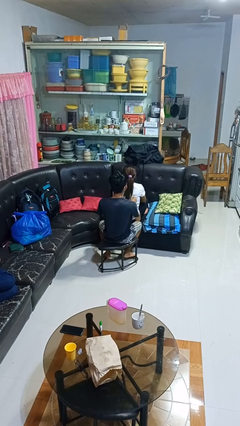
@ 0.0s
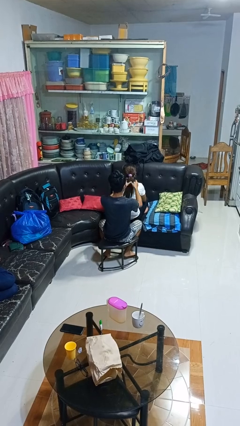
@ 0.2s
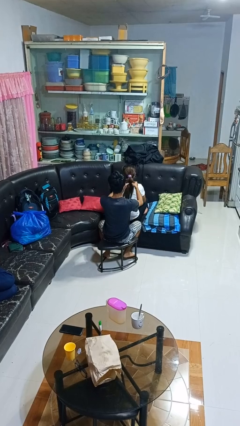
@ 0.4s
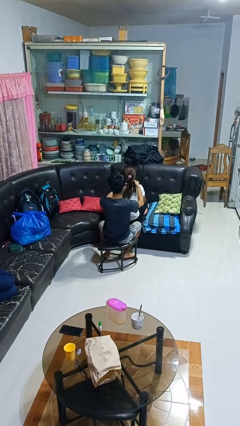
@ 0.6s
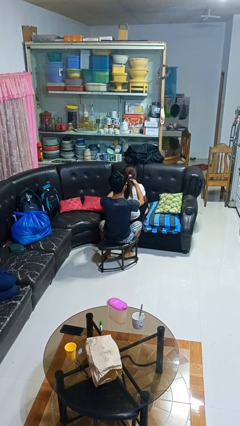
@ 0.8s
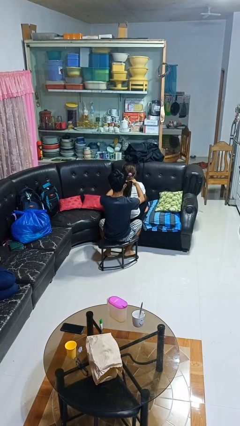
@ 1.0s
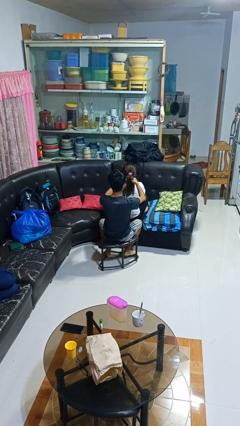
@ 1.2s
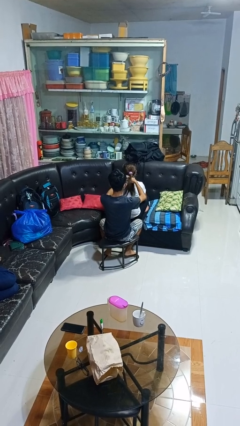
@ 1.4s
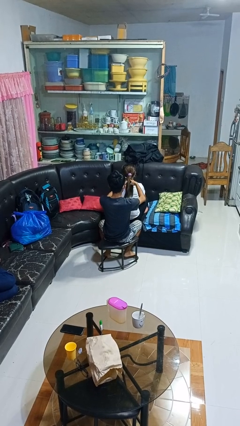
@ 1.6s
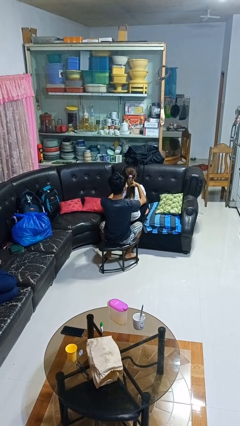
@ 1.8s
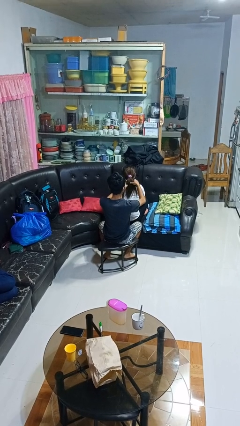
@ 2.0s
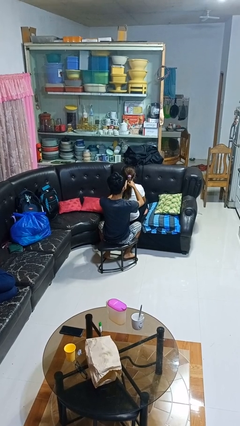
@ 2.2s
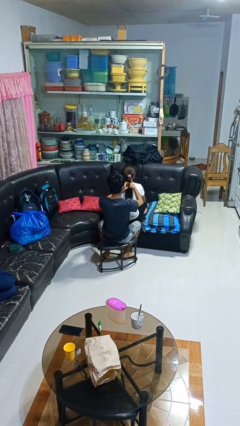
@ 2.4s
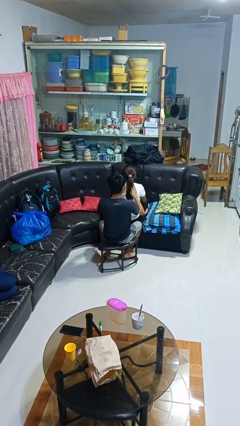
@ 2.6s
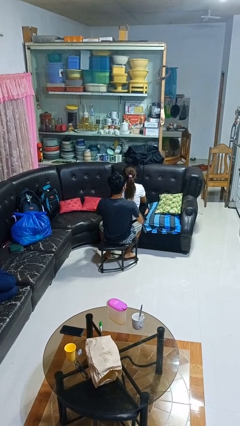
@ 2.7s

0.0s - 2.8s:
person braids hair of person

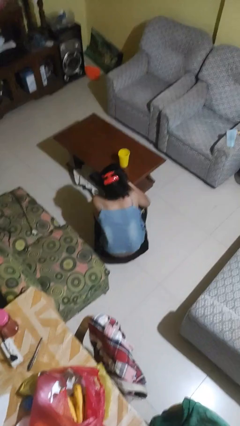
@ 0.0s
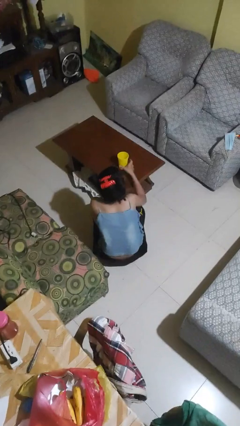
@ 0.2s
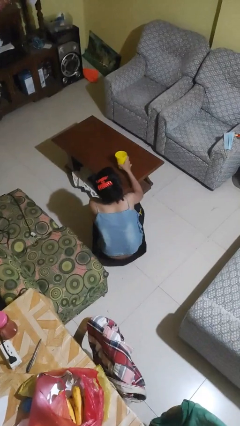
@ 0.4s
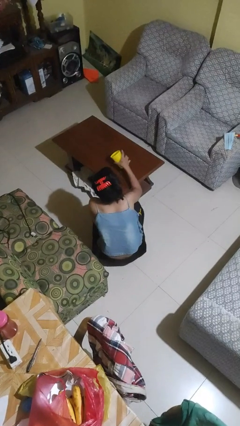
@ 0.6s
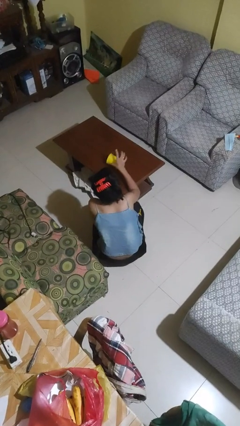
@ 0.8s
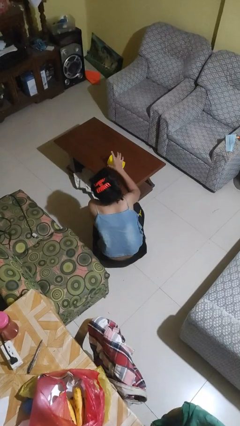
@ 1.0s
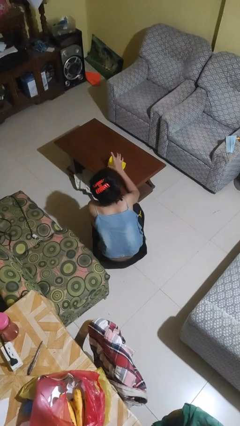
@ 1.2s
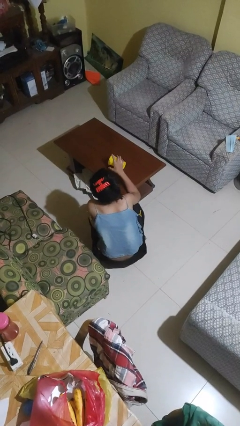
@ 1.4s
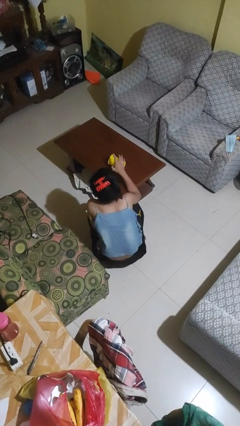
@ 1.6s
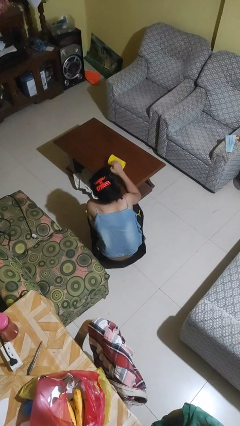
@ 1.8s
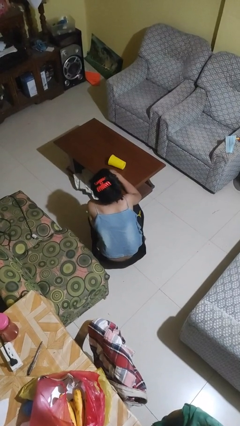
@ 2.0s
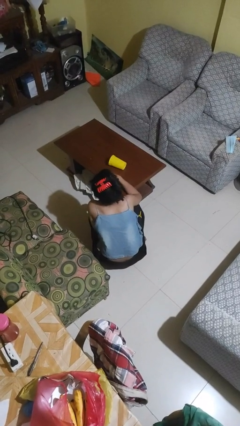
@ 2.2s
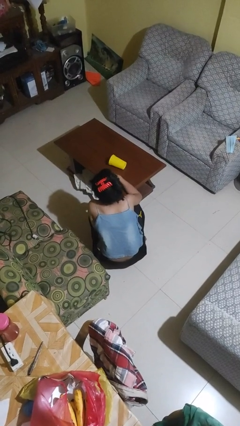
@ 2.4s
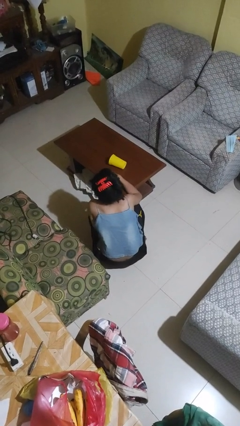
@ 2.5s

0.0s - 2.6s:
person spills on table

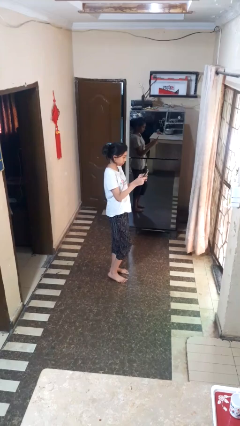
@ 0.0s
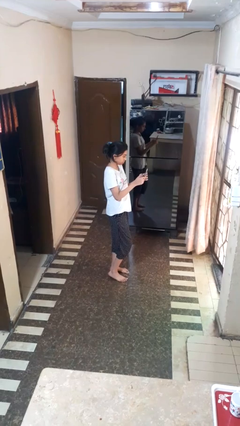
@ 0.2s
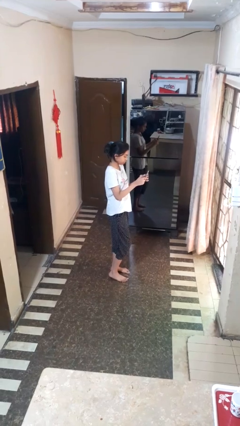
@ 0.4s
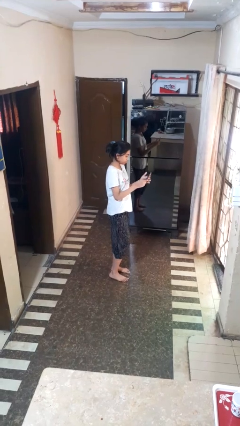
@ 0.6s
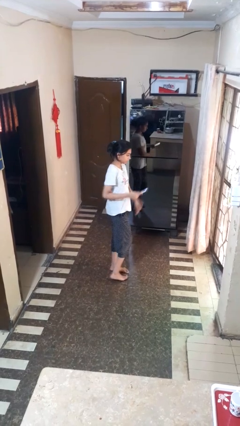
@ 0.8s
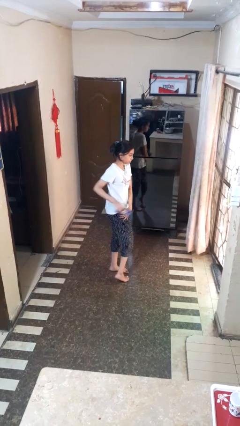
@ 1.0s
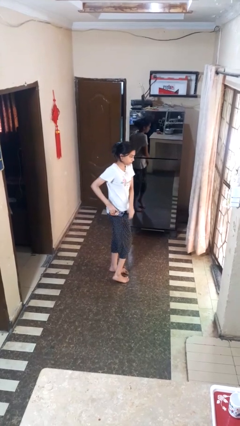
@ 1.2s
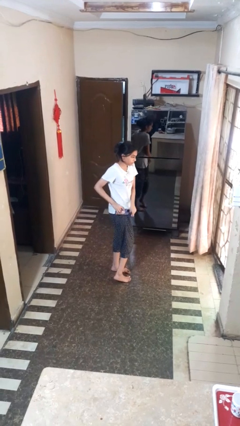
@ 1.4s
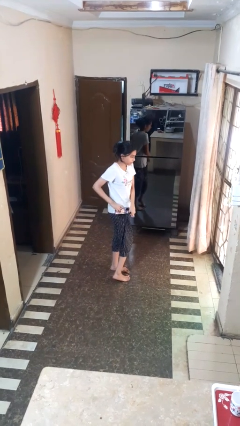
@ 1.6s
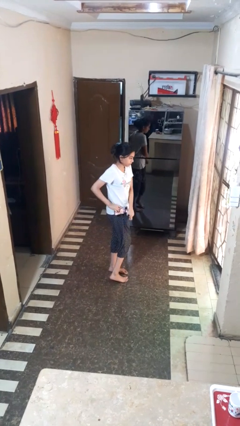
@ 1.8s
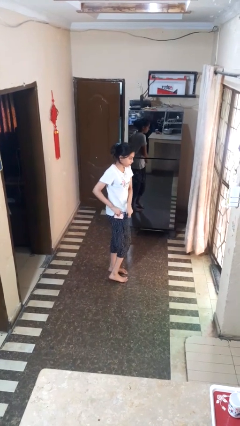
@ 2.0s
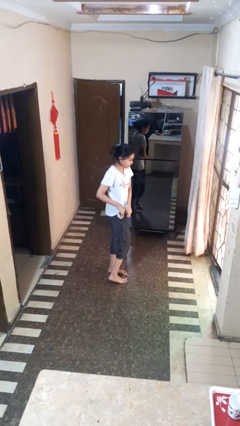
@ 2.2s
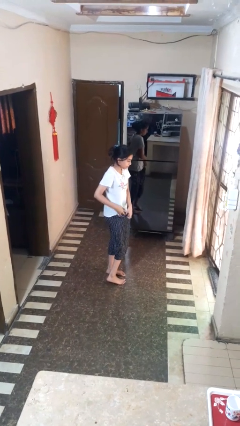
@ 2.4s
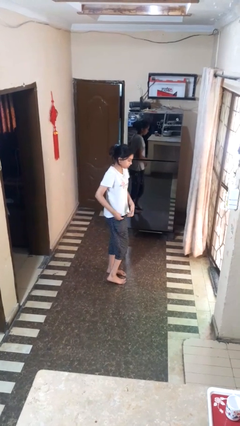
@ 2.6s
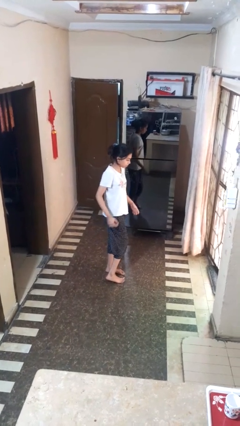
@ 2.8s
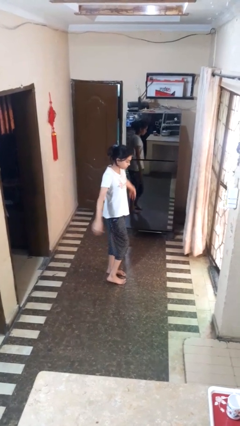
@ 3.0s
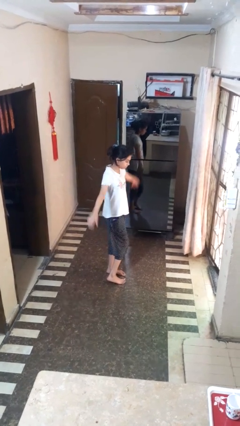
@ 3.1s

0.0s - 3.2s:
person puts phone into pocket

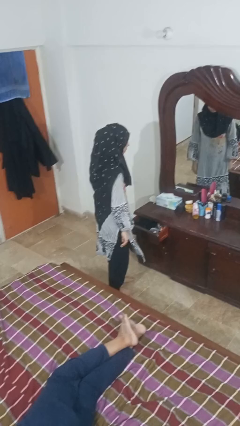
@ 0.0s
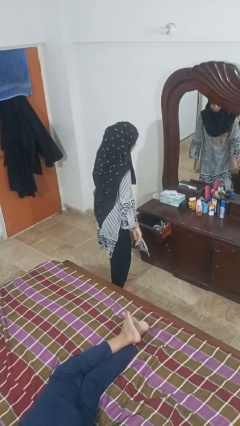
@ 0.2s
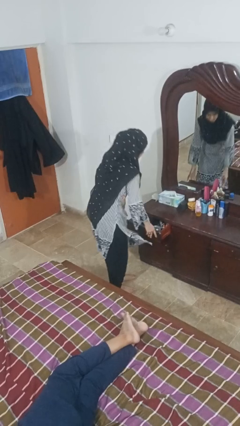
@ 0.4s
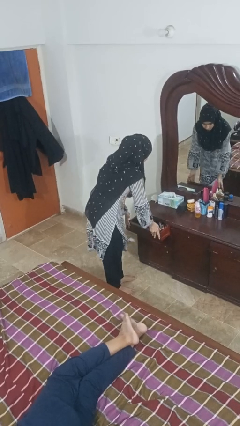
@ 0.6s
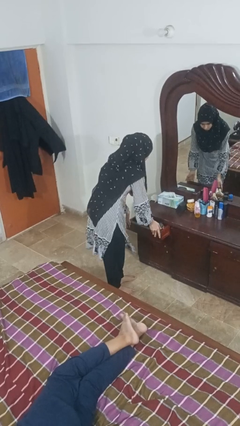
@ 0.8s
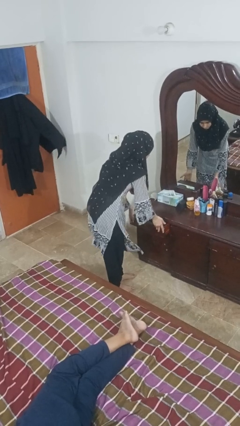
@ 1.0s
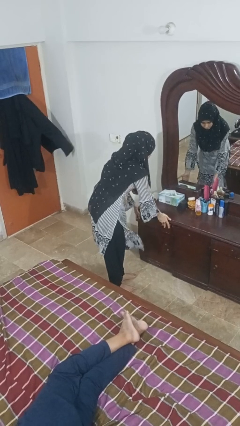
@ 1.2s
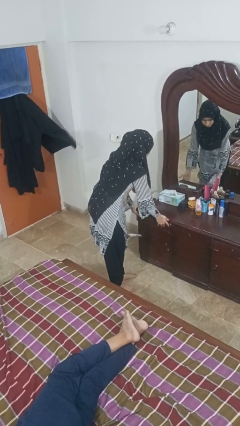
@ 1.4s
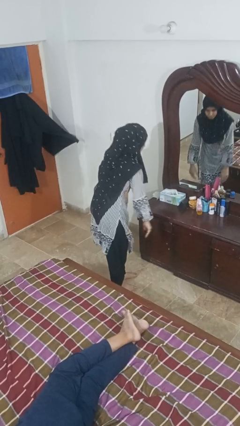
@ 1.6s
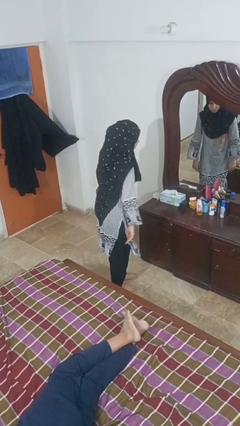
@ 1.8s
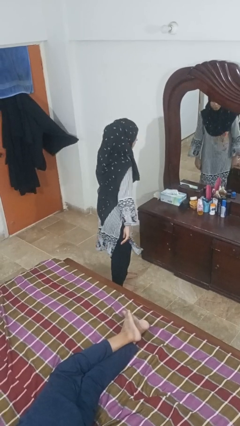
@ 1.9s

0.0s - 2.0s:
person closes dresser drawer

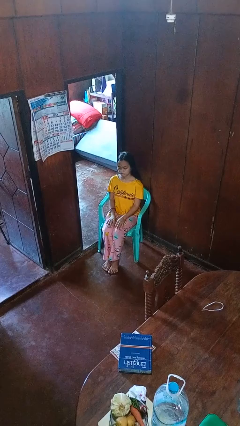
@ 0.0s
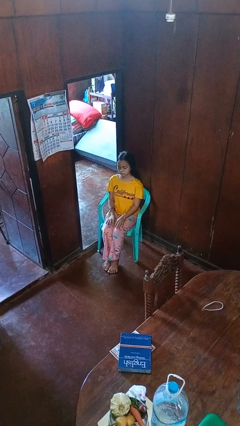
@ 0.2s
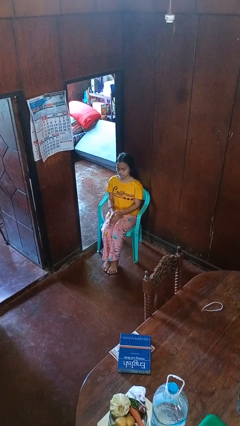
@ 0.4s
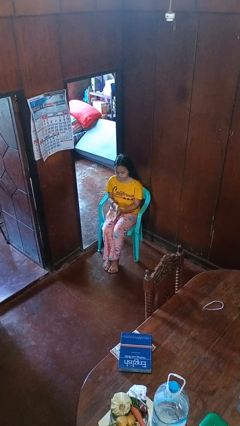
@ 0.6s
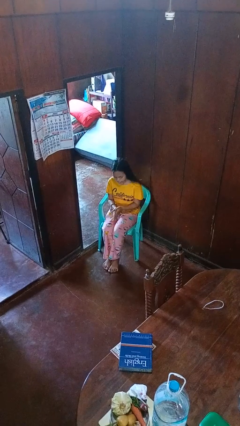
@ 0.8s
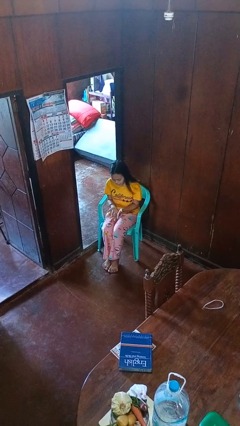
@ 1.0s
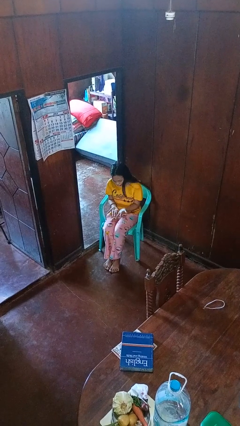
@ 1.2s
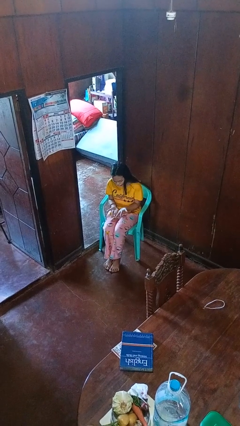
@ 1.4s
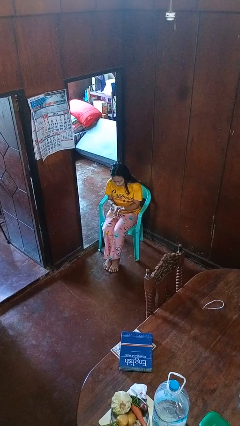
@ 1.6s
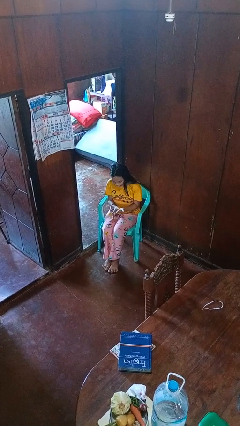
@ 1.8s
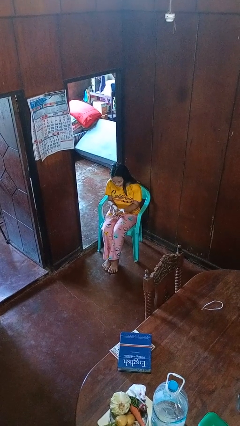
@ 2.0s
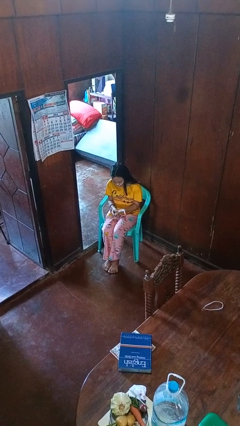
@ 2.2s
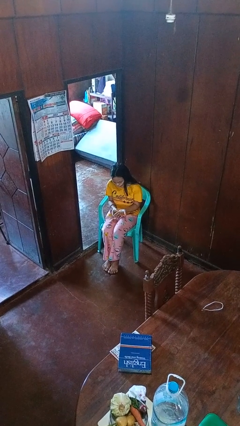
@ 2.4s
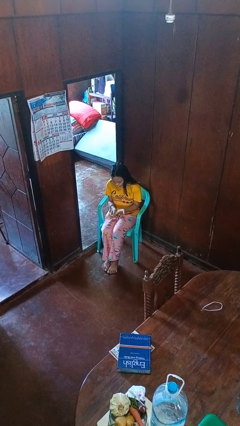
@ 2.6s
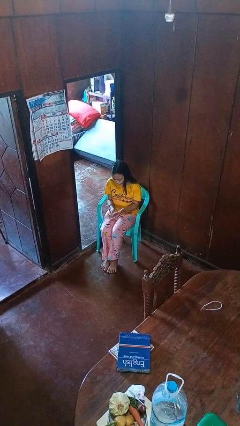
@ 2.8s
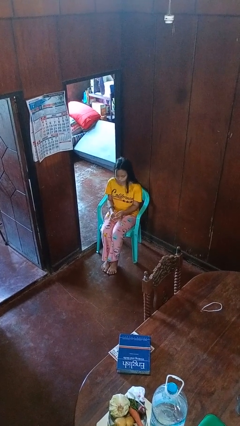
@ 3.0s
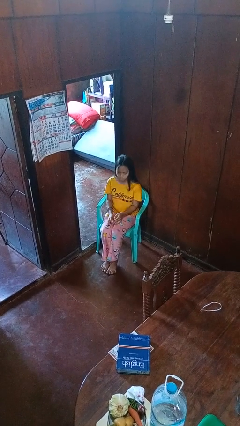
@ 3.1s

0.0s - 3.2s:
person looks at hands in lap

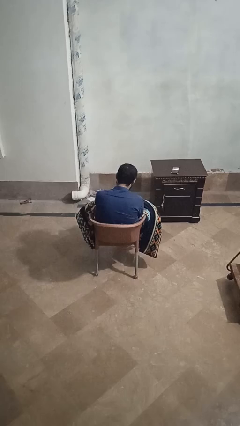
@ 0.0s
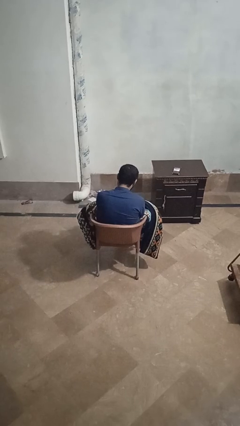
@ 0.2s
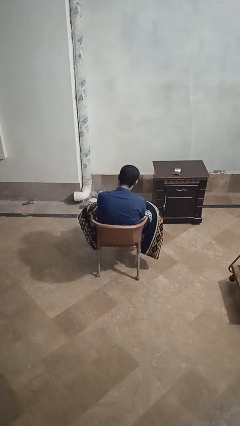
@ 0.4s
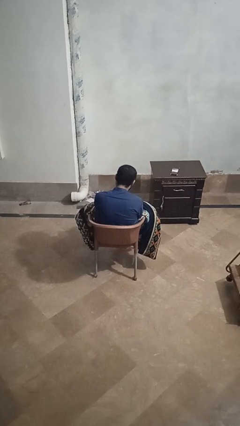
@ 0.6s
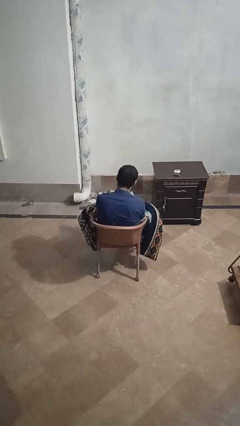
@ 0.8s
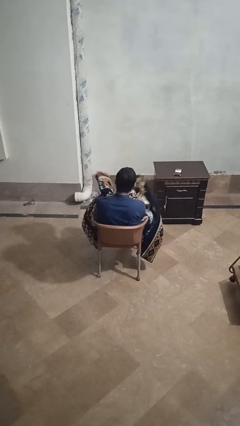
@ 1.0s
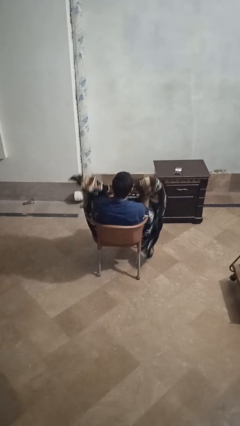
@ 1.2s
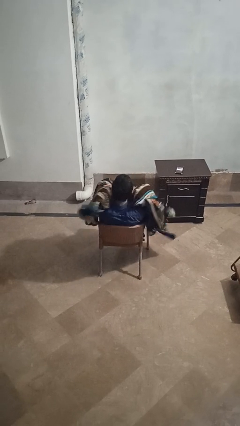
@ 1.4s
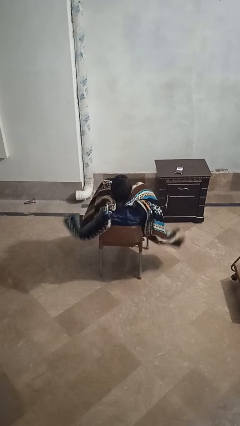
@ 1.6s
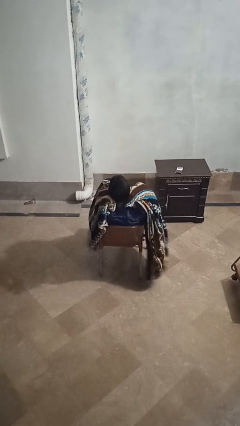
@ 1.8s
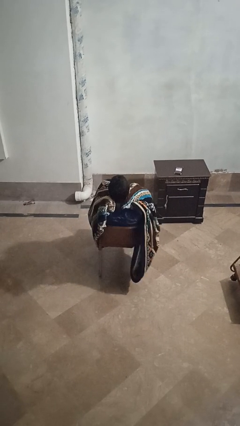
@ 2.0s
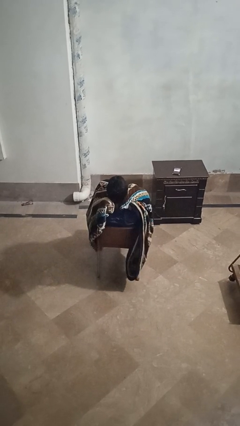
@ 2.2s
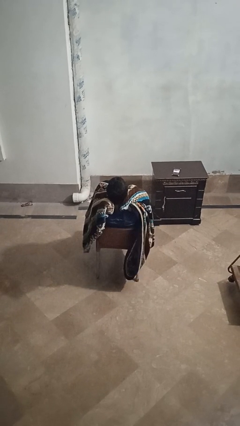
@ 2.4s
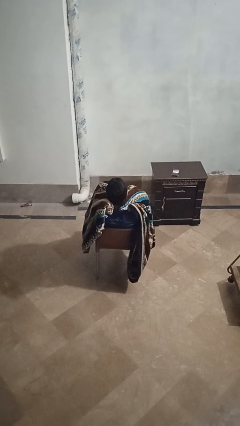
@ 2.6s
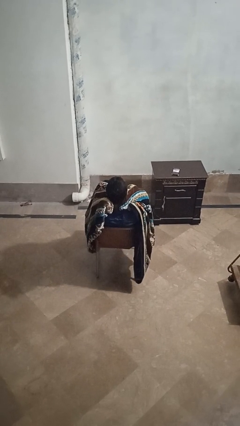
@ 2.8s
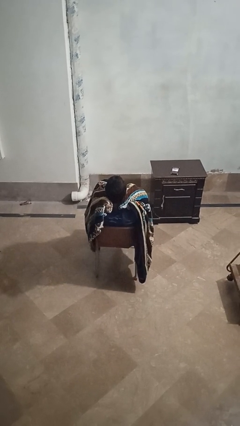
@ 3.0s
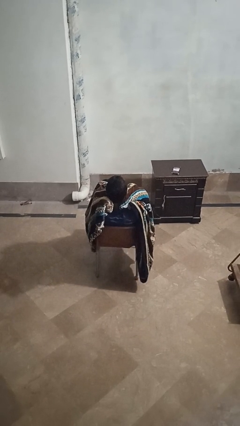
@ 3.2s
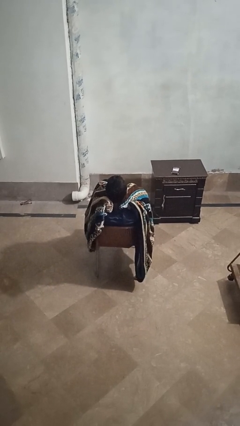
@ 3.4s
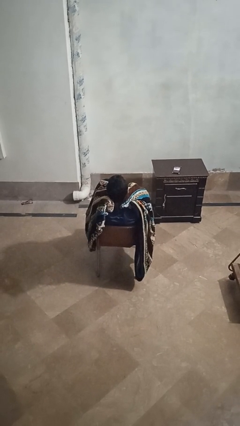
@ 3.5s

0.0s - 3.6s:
person covers with blanket
